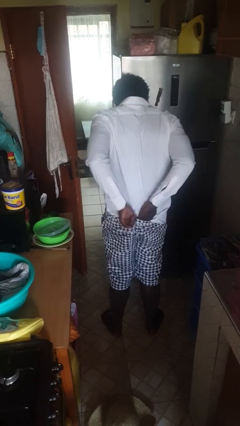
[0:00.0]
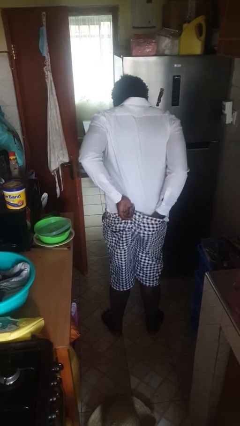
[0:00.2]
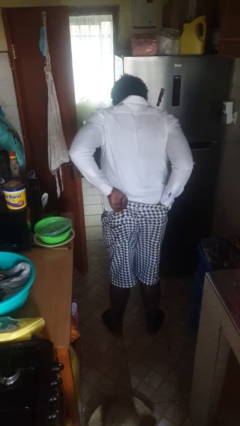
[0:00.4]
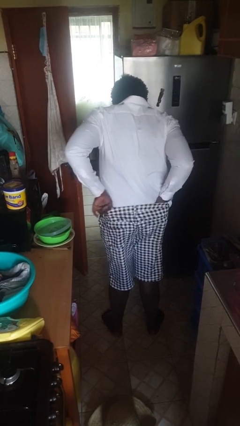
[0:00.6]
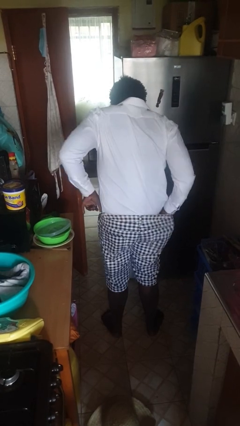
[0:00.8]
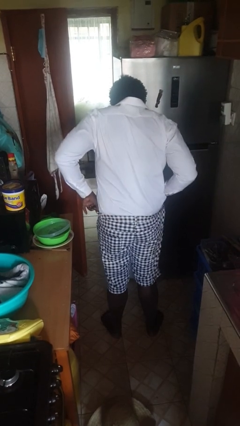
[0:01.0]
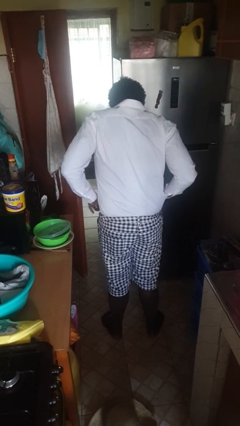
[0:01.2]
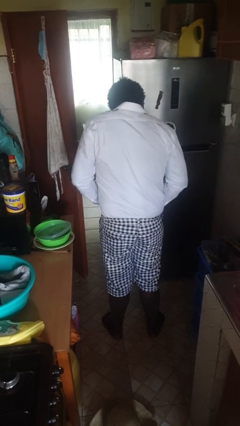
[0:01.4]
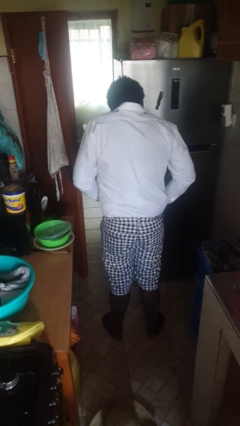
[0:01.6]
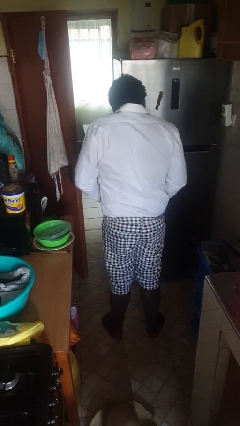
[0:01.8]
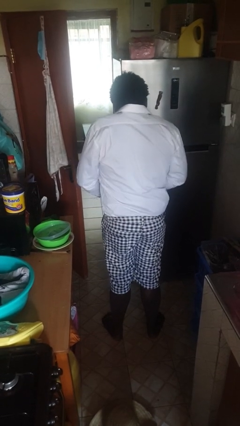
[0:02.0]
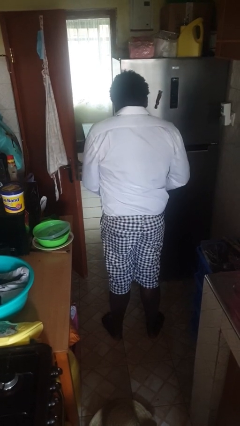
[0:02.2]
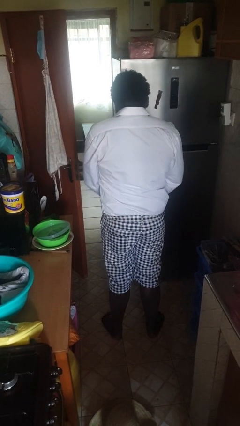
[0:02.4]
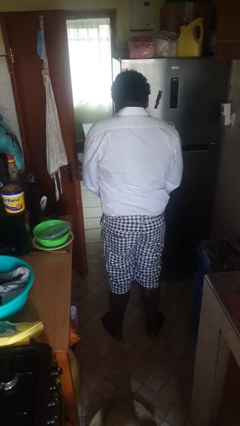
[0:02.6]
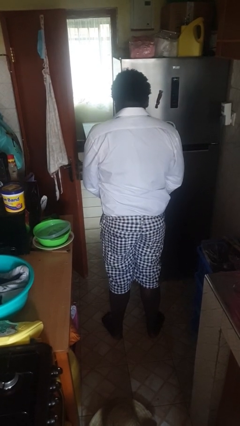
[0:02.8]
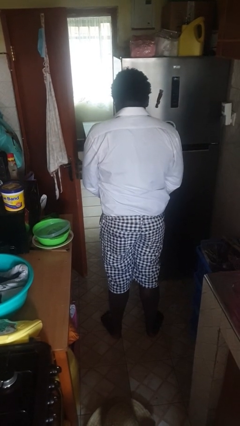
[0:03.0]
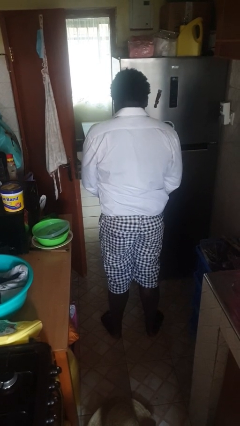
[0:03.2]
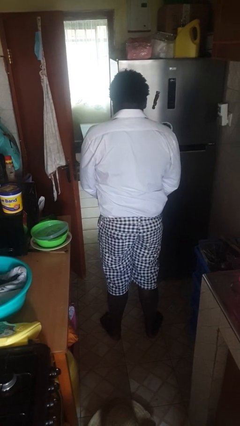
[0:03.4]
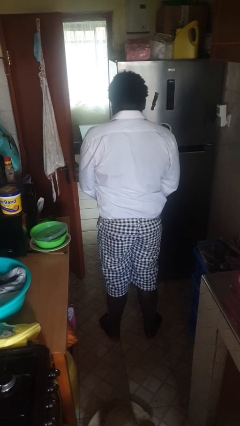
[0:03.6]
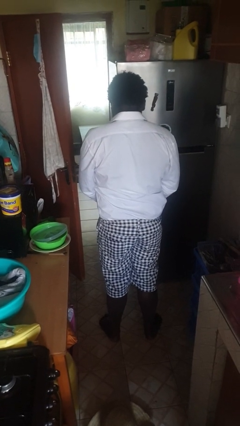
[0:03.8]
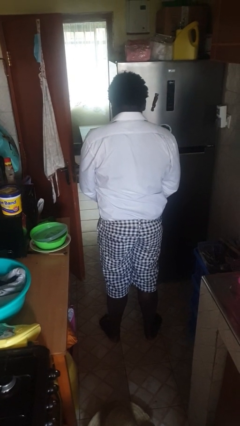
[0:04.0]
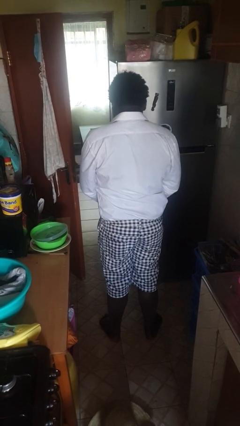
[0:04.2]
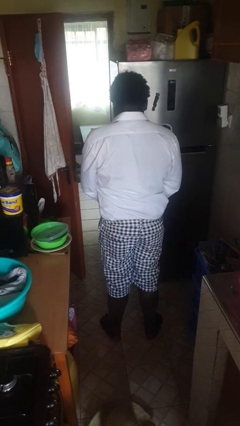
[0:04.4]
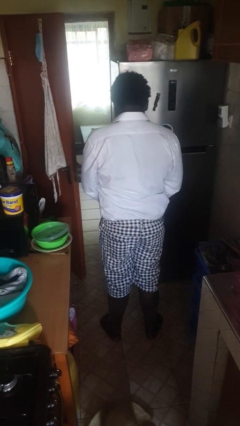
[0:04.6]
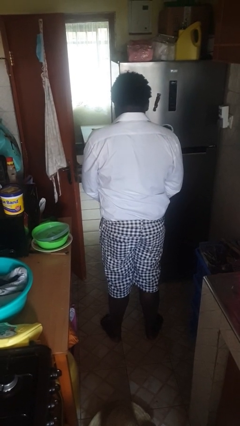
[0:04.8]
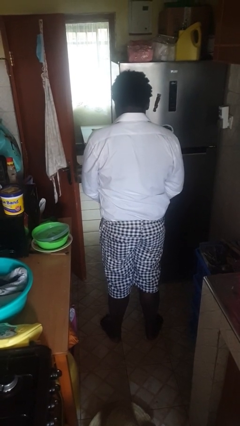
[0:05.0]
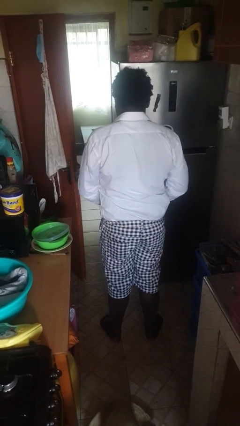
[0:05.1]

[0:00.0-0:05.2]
person tucks in shirt

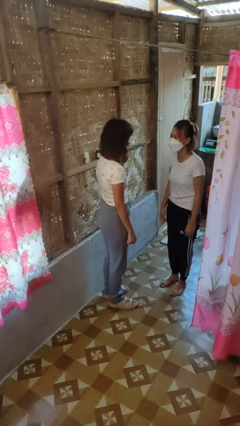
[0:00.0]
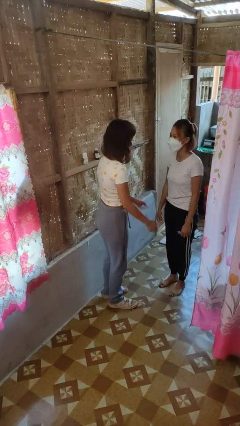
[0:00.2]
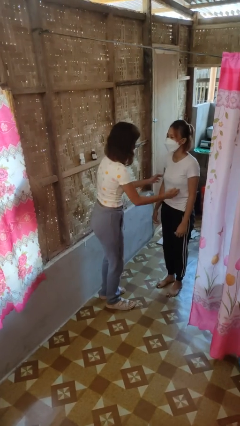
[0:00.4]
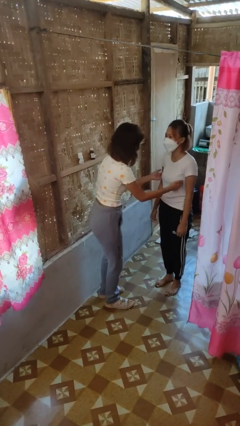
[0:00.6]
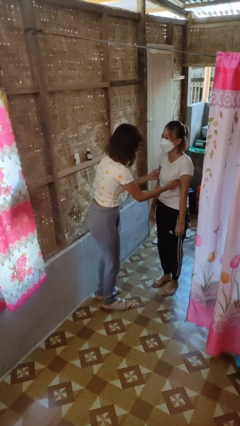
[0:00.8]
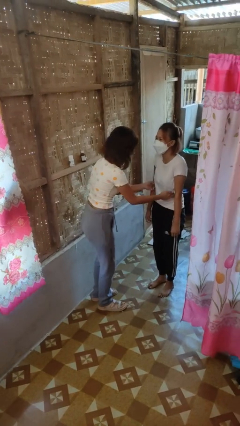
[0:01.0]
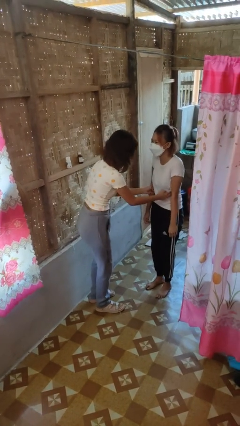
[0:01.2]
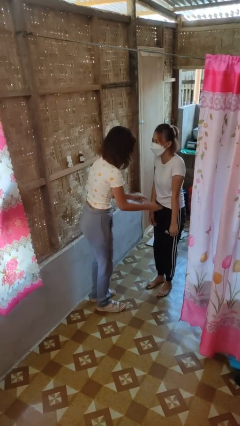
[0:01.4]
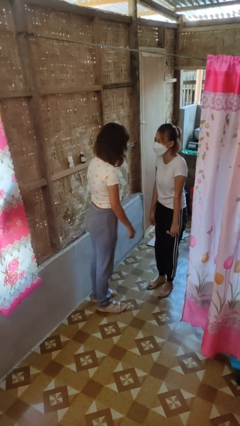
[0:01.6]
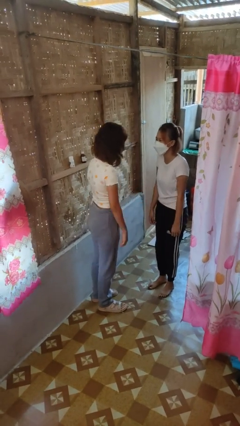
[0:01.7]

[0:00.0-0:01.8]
person tickles person

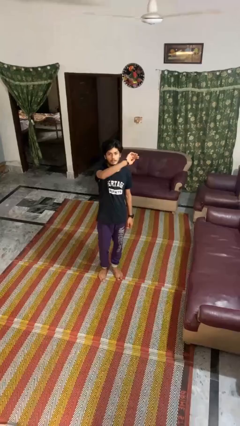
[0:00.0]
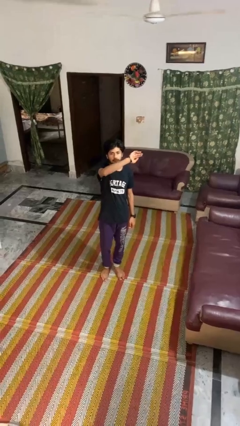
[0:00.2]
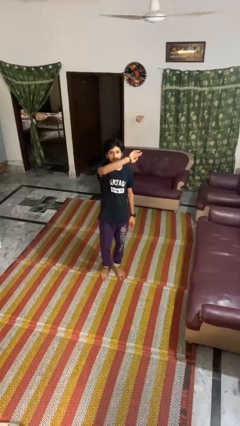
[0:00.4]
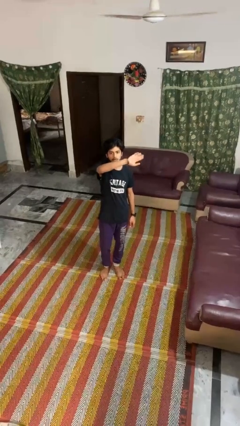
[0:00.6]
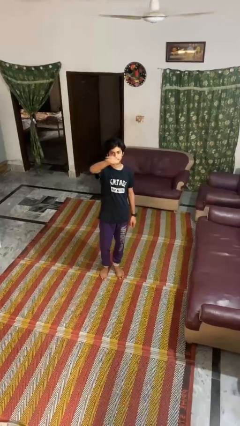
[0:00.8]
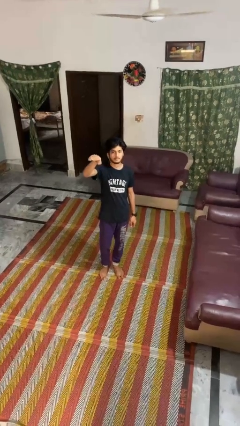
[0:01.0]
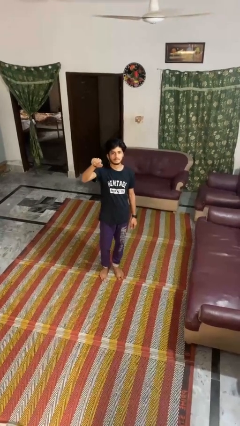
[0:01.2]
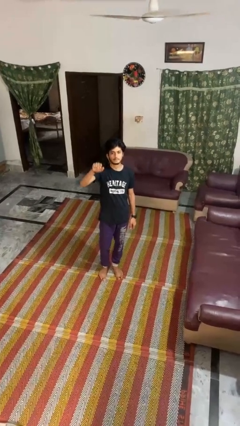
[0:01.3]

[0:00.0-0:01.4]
person gestures swipe right

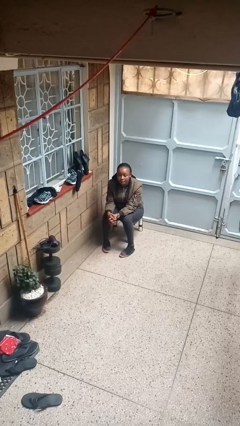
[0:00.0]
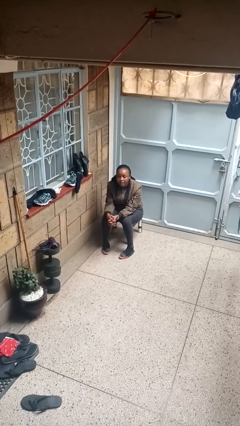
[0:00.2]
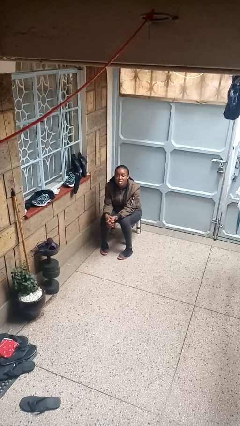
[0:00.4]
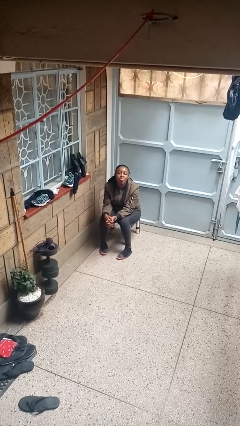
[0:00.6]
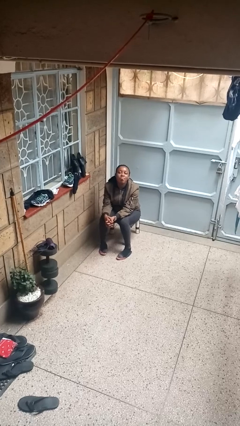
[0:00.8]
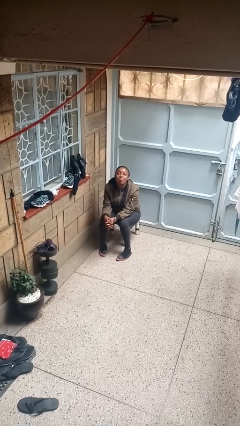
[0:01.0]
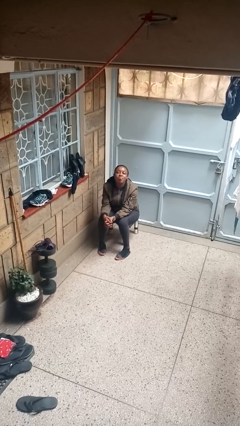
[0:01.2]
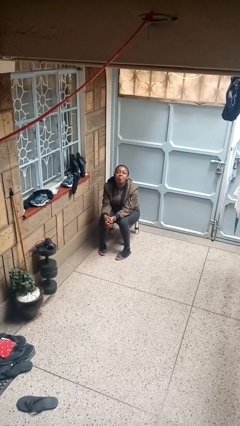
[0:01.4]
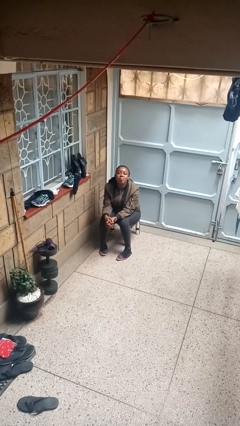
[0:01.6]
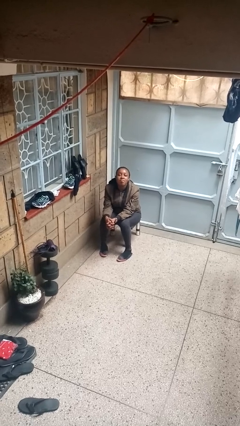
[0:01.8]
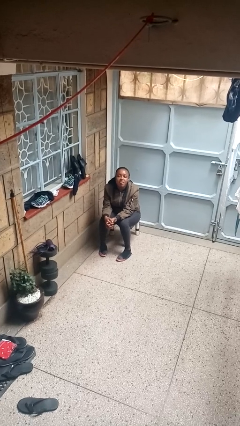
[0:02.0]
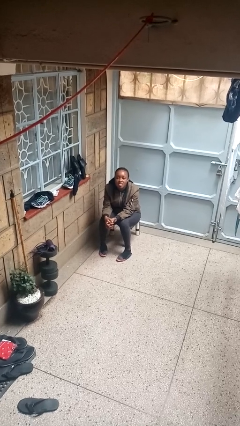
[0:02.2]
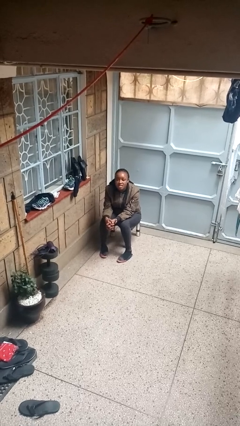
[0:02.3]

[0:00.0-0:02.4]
person sticks out tongue

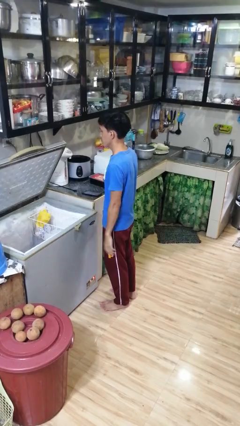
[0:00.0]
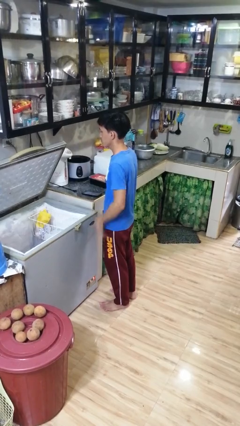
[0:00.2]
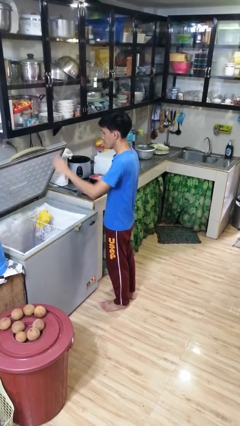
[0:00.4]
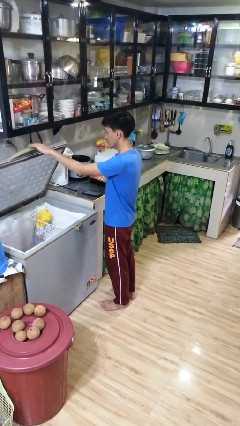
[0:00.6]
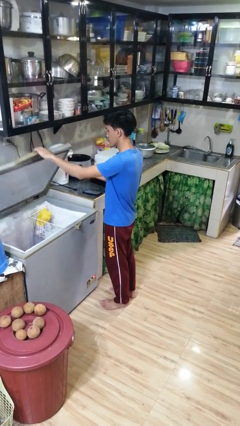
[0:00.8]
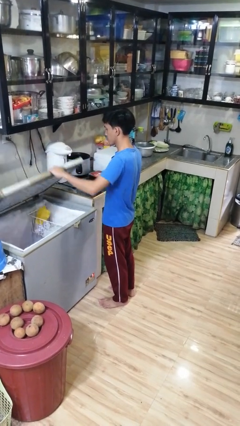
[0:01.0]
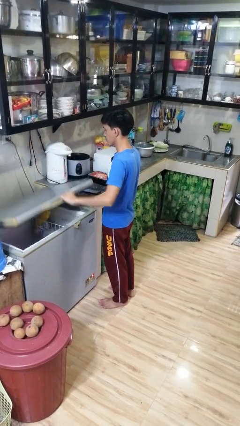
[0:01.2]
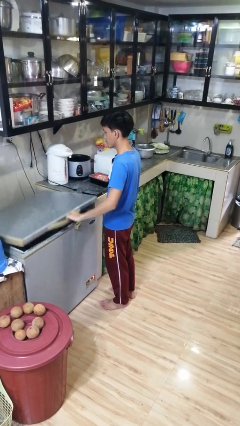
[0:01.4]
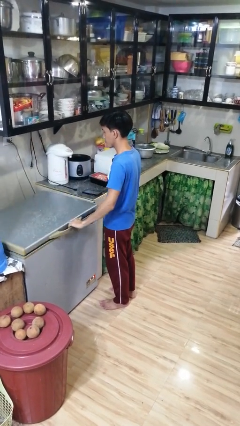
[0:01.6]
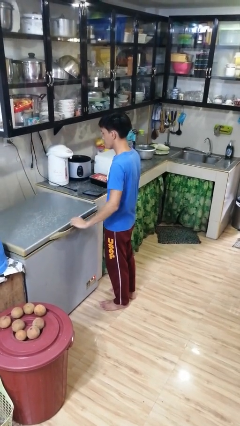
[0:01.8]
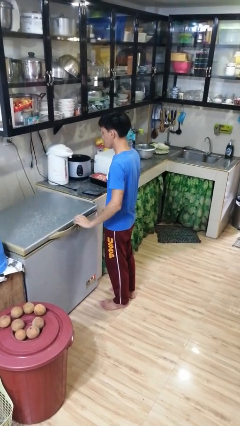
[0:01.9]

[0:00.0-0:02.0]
person closes refrigerator

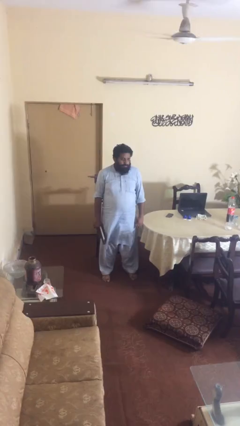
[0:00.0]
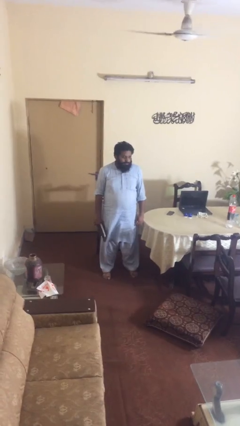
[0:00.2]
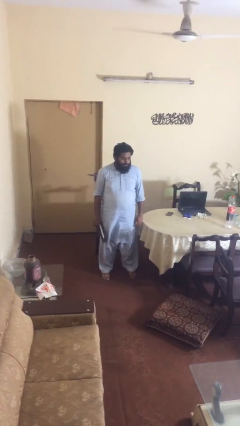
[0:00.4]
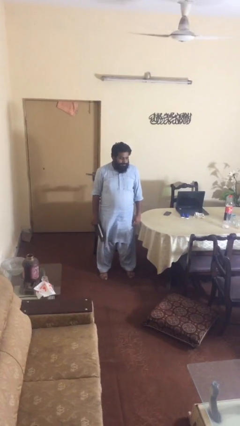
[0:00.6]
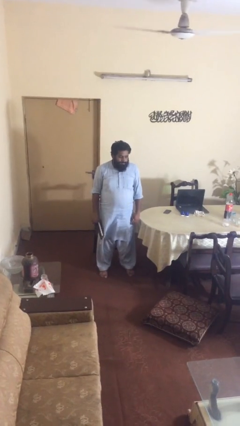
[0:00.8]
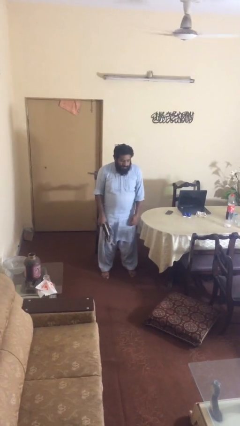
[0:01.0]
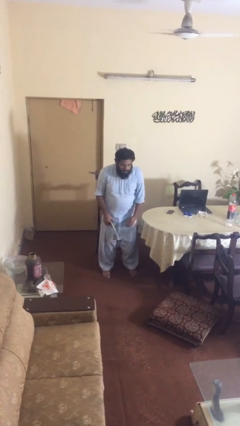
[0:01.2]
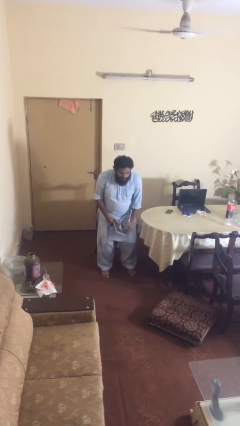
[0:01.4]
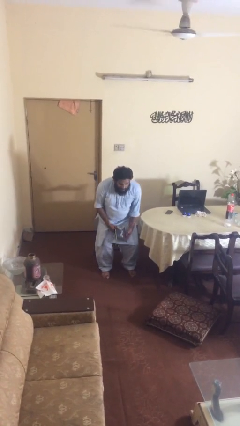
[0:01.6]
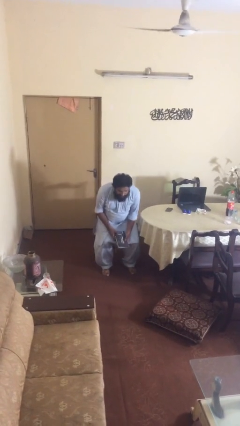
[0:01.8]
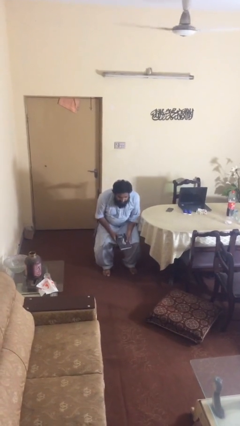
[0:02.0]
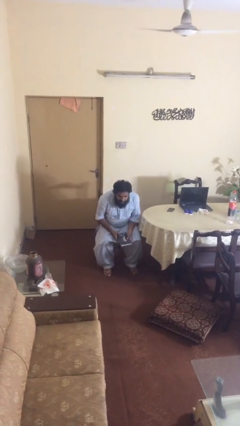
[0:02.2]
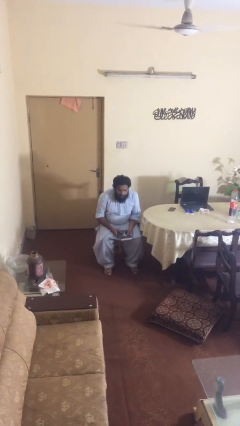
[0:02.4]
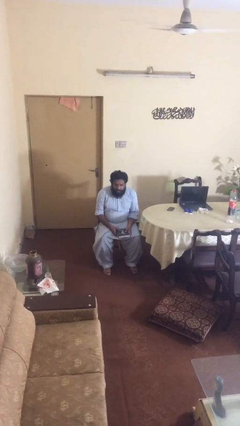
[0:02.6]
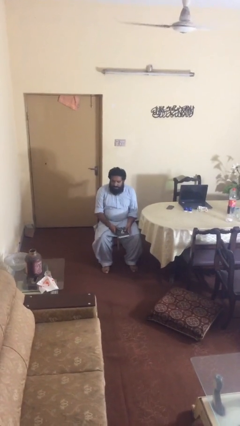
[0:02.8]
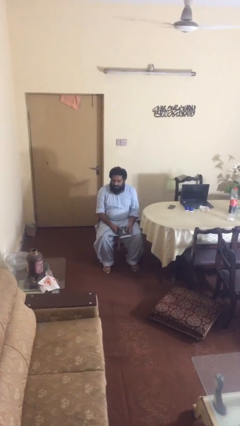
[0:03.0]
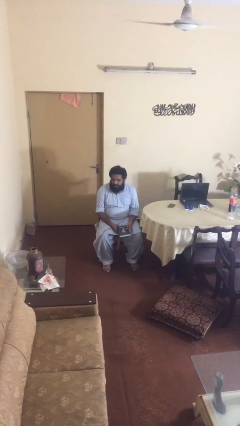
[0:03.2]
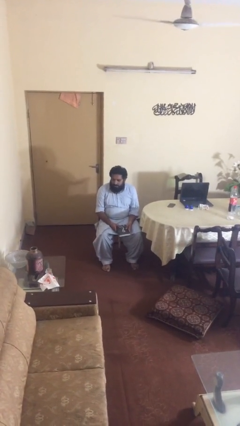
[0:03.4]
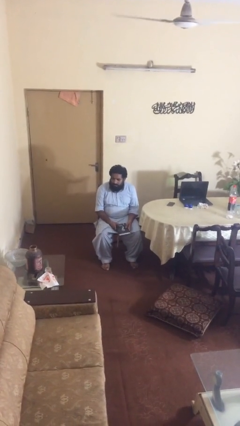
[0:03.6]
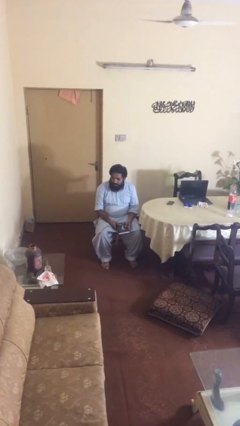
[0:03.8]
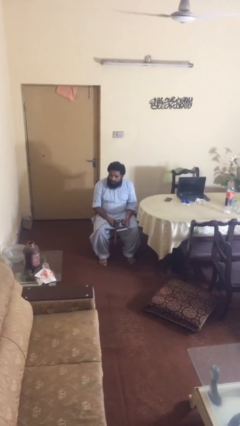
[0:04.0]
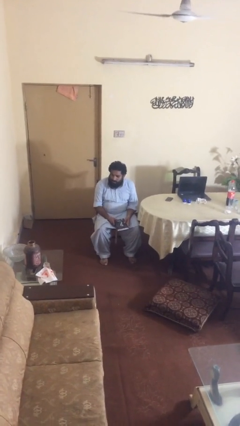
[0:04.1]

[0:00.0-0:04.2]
person sits down
